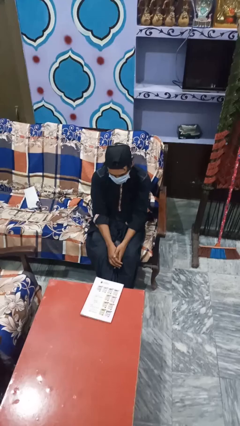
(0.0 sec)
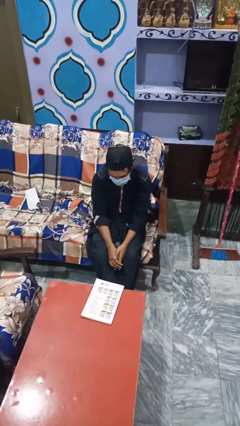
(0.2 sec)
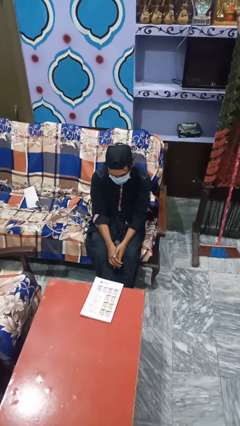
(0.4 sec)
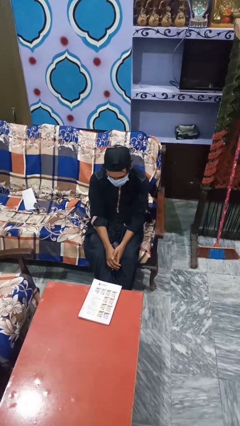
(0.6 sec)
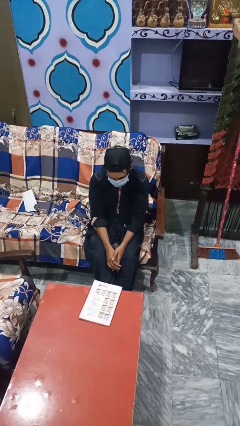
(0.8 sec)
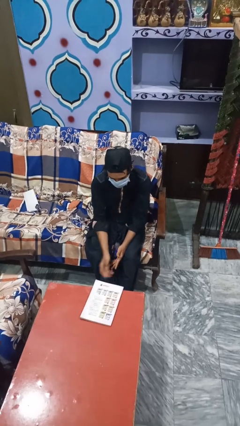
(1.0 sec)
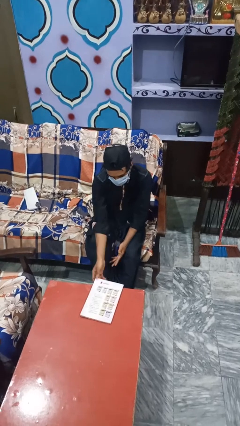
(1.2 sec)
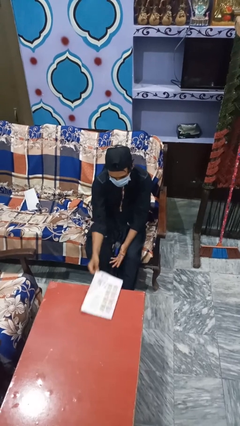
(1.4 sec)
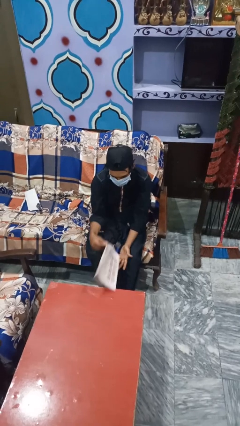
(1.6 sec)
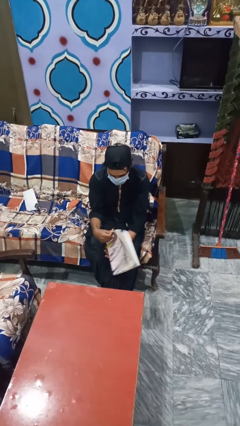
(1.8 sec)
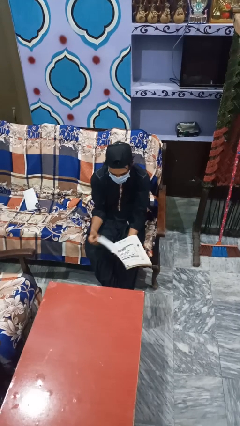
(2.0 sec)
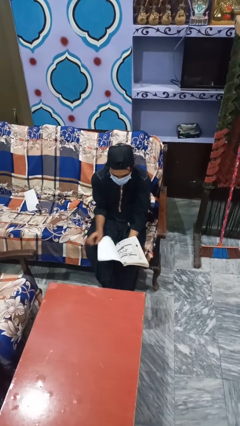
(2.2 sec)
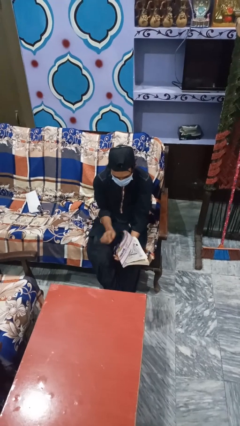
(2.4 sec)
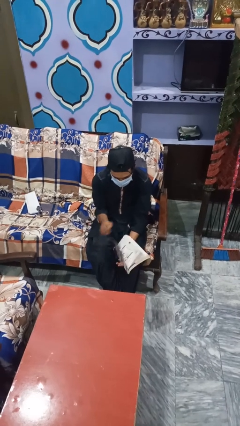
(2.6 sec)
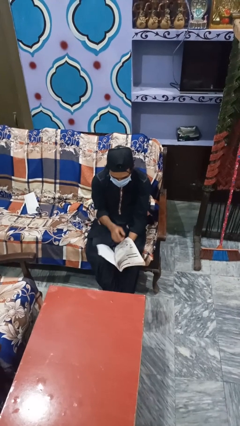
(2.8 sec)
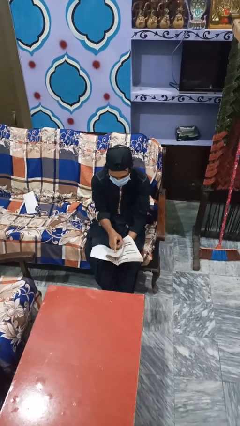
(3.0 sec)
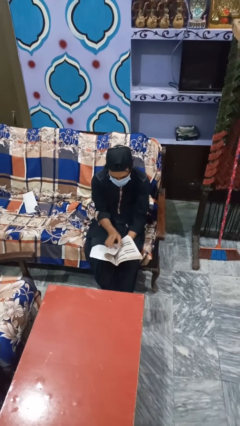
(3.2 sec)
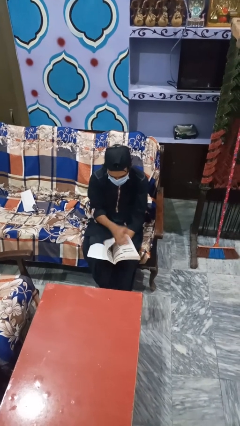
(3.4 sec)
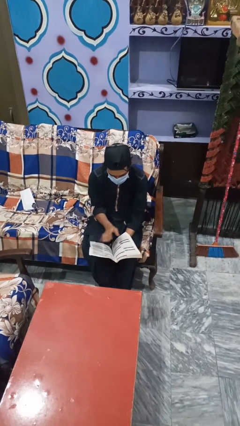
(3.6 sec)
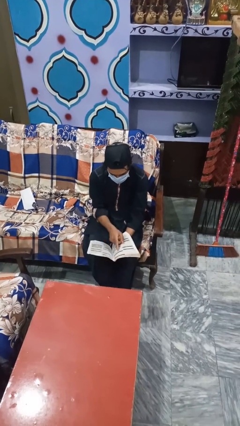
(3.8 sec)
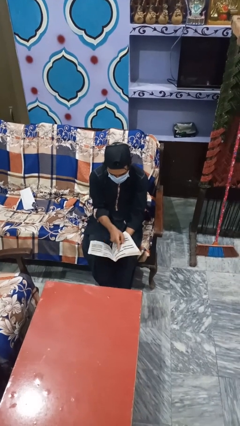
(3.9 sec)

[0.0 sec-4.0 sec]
person reads magazine

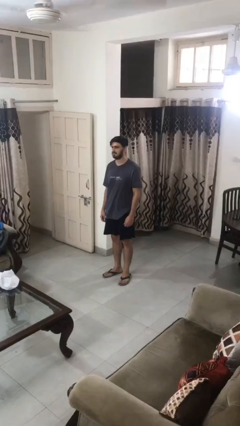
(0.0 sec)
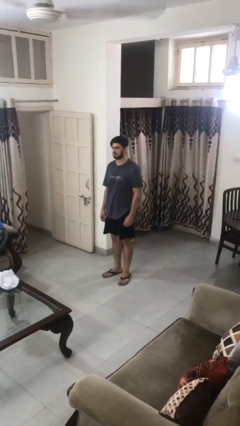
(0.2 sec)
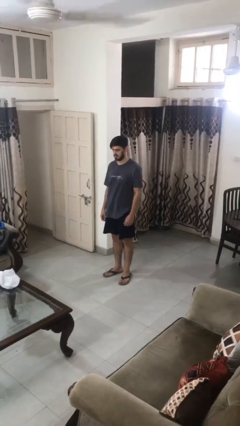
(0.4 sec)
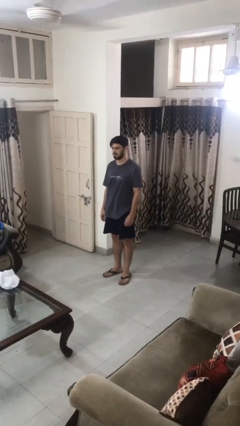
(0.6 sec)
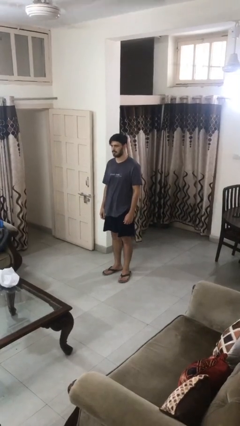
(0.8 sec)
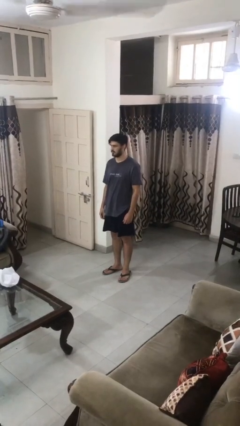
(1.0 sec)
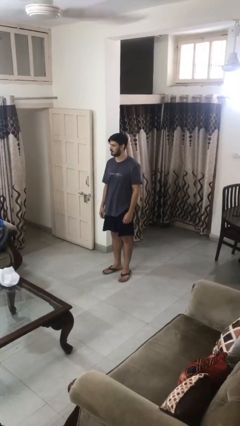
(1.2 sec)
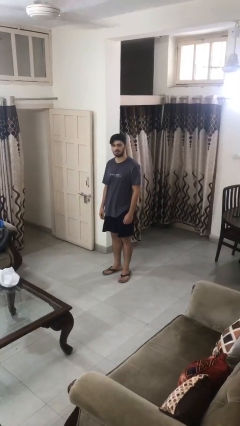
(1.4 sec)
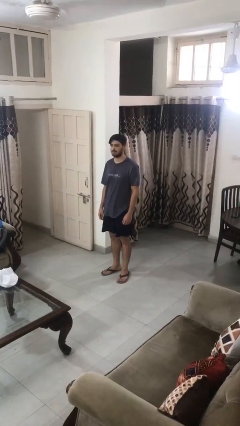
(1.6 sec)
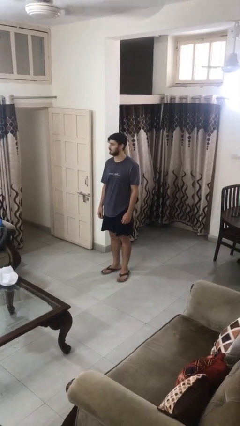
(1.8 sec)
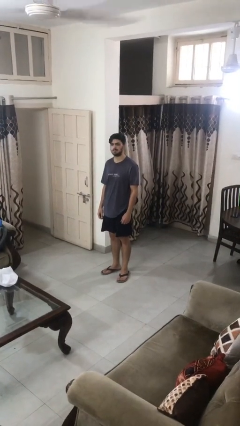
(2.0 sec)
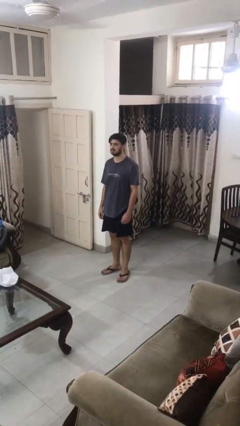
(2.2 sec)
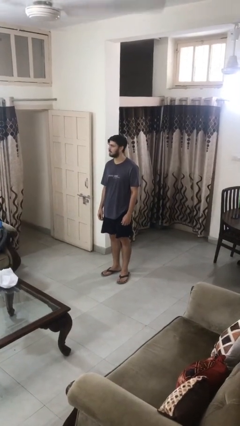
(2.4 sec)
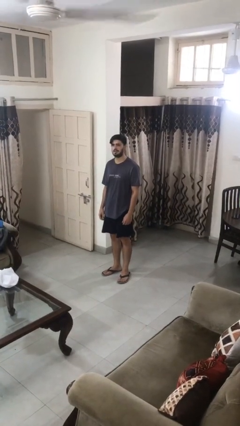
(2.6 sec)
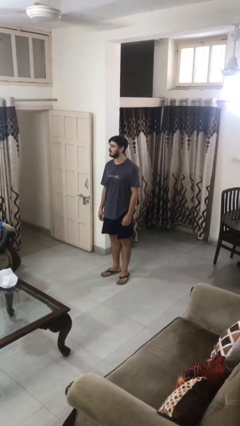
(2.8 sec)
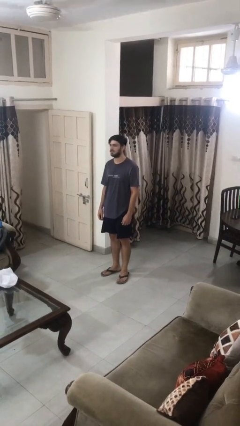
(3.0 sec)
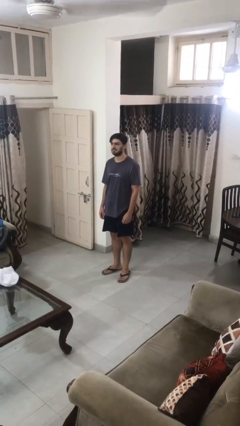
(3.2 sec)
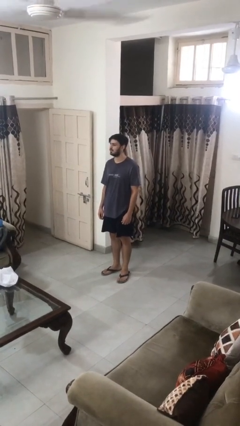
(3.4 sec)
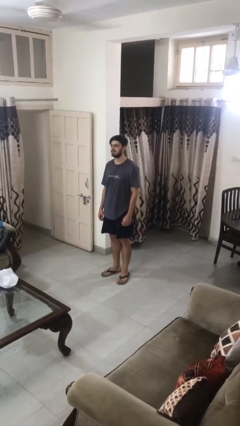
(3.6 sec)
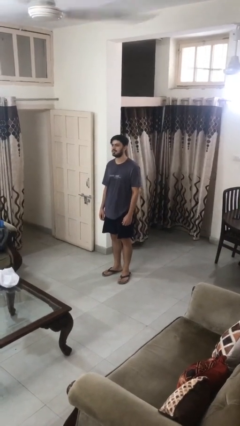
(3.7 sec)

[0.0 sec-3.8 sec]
person shakes head

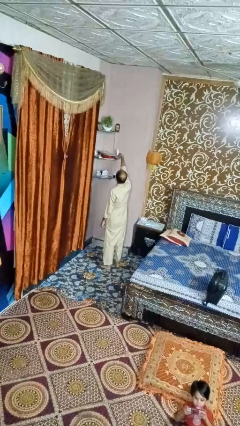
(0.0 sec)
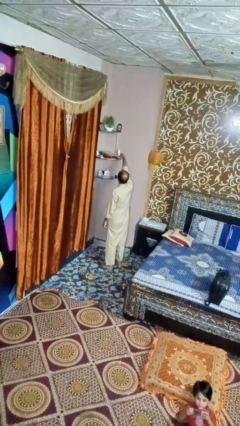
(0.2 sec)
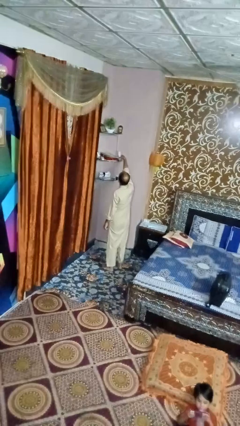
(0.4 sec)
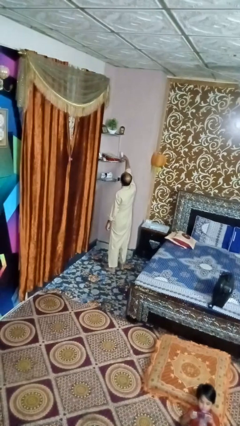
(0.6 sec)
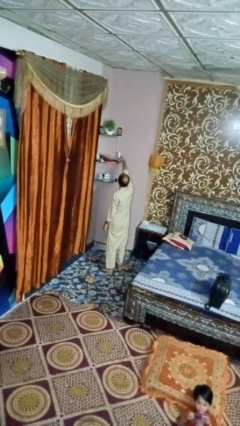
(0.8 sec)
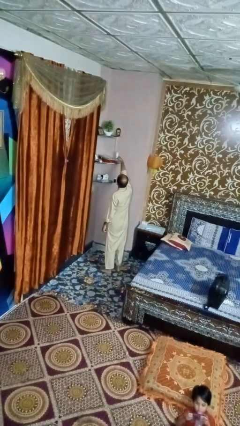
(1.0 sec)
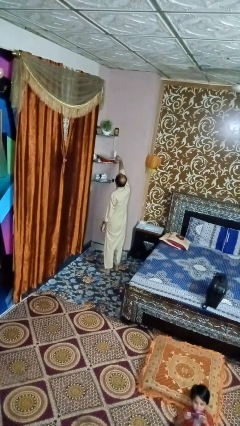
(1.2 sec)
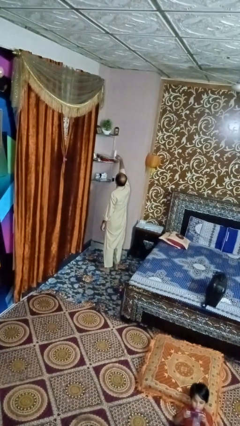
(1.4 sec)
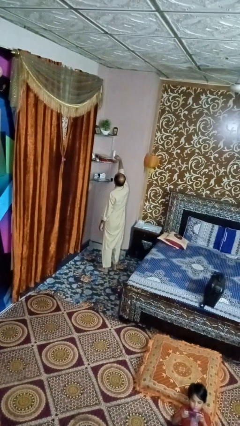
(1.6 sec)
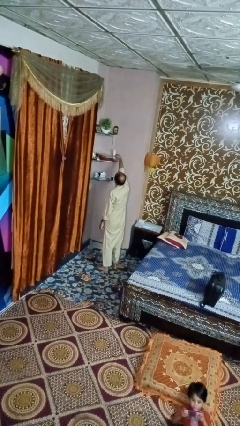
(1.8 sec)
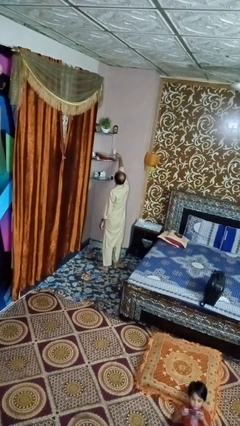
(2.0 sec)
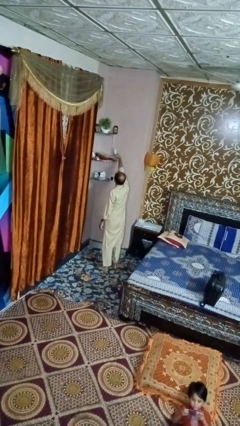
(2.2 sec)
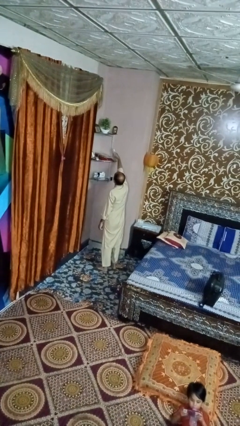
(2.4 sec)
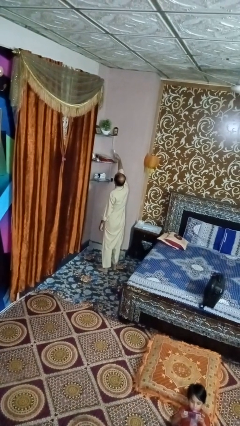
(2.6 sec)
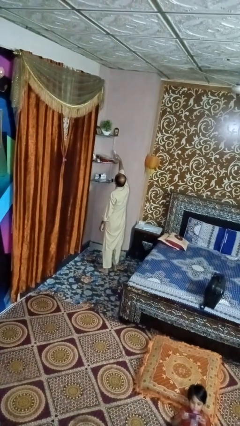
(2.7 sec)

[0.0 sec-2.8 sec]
person picks up object from shelf

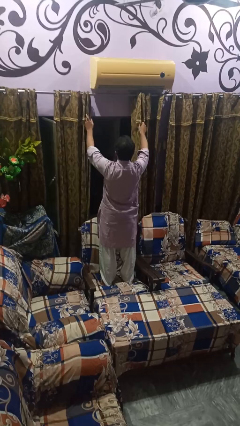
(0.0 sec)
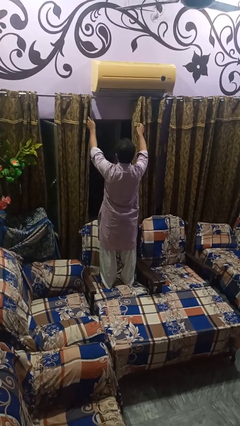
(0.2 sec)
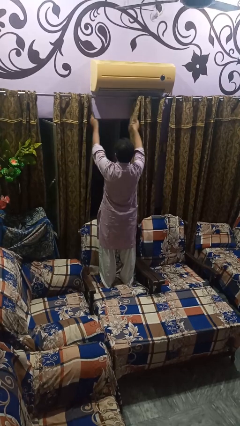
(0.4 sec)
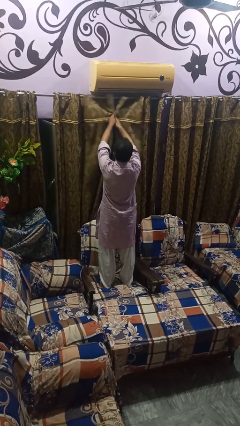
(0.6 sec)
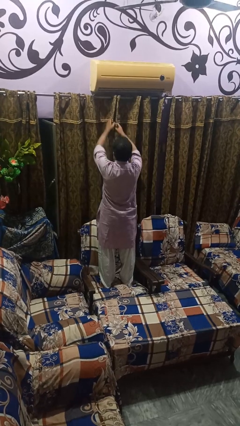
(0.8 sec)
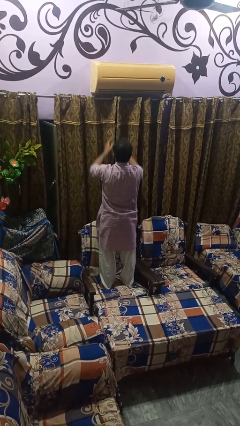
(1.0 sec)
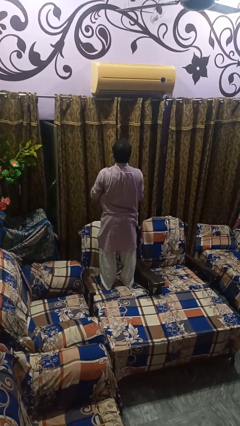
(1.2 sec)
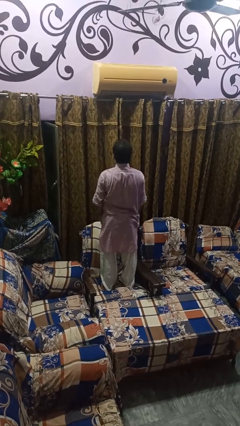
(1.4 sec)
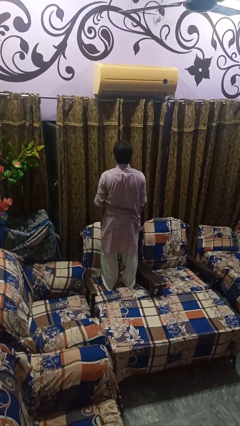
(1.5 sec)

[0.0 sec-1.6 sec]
person closes curtains

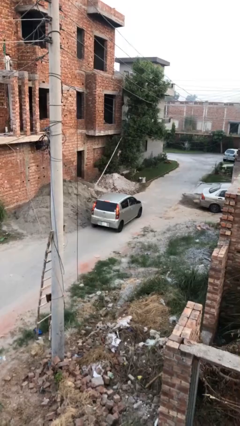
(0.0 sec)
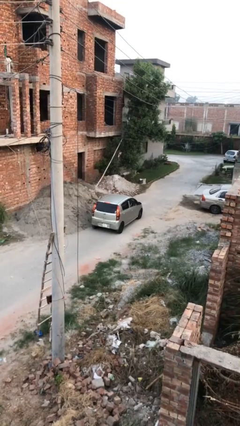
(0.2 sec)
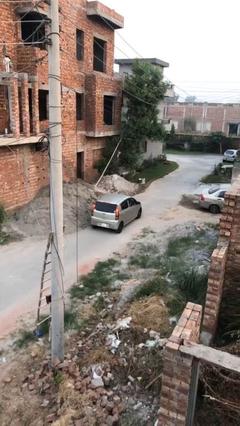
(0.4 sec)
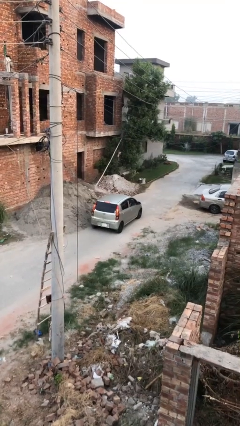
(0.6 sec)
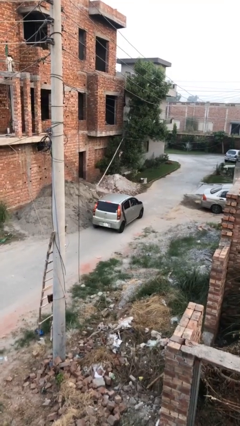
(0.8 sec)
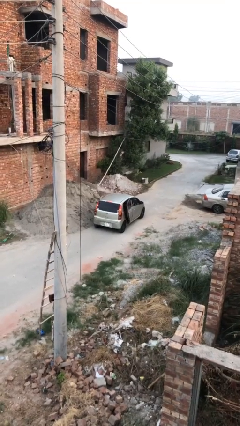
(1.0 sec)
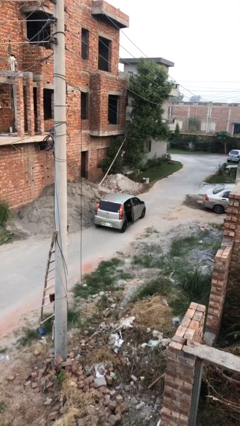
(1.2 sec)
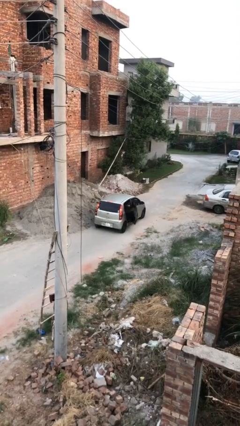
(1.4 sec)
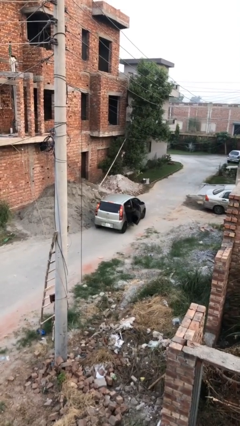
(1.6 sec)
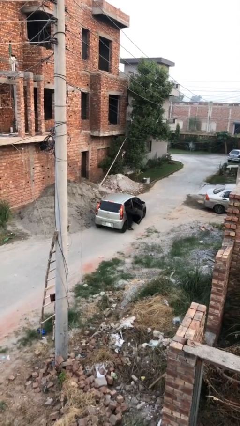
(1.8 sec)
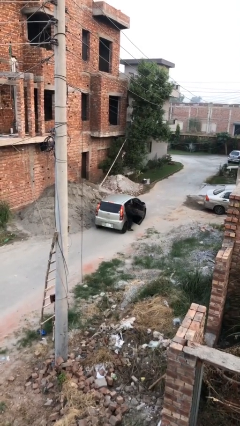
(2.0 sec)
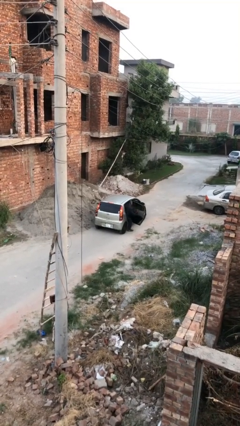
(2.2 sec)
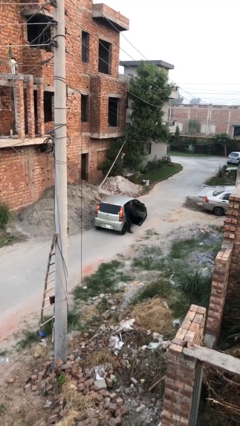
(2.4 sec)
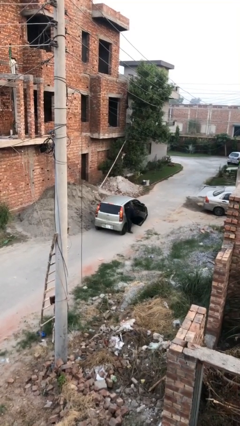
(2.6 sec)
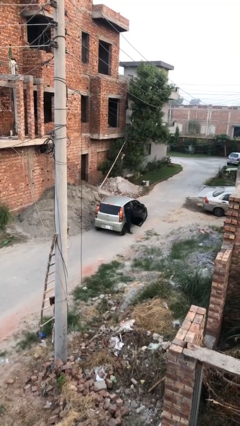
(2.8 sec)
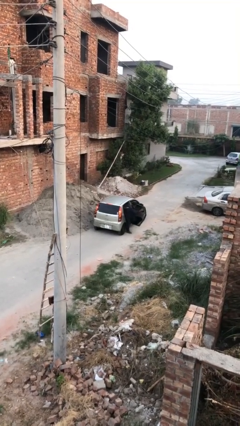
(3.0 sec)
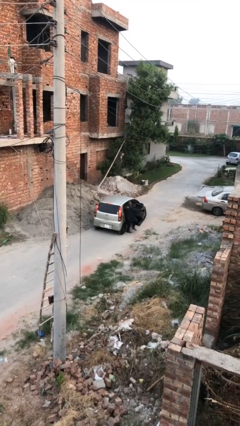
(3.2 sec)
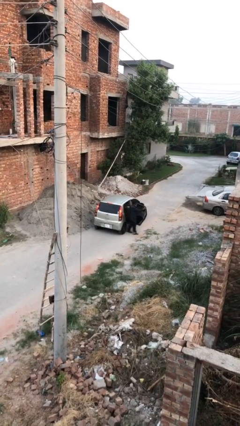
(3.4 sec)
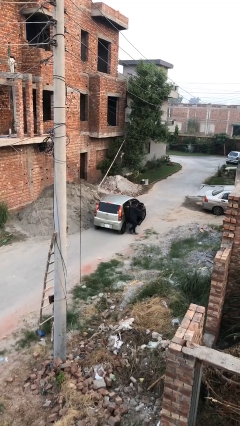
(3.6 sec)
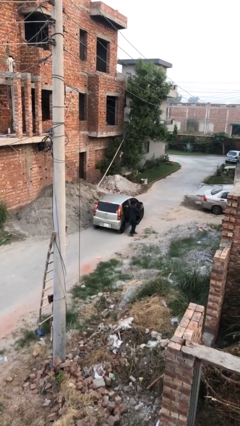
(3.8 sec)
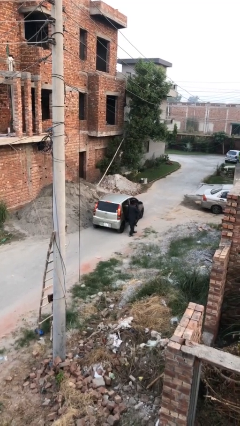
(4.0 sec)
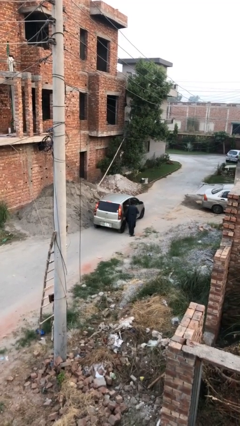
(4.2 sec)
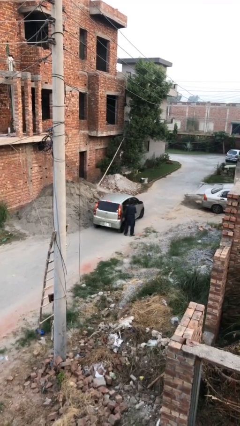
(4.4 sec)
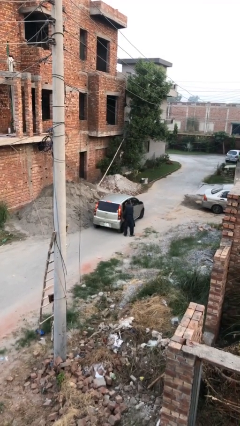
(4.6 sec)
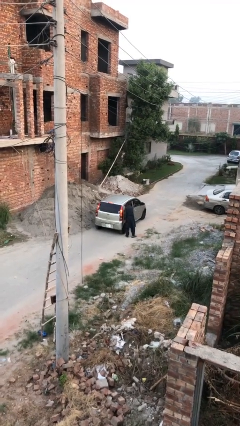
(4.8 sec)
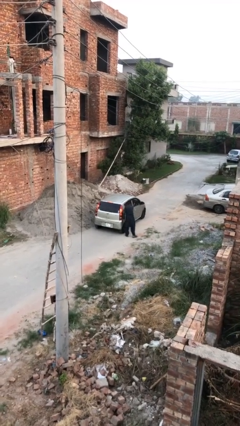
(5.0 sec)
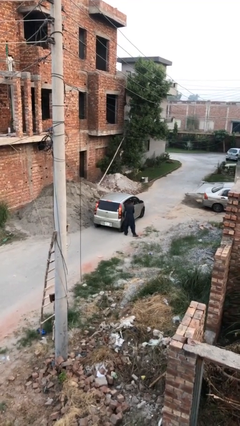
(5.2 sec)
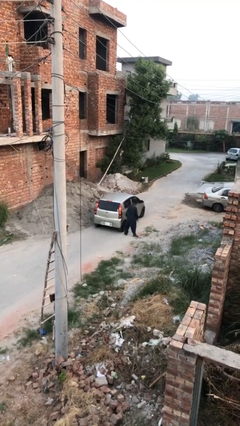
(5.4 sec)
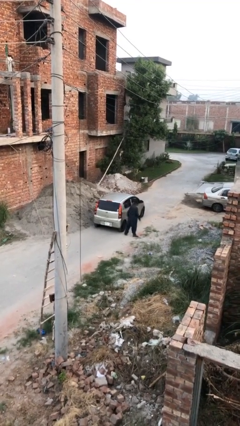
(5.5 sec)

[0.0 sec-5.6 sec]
car drops off person
